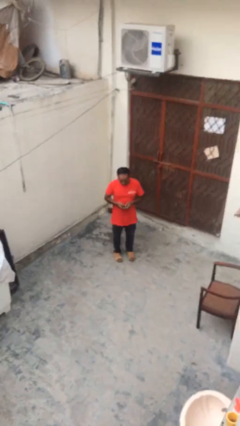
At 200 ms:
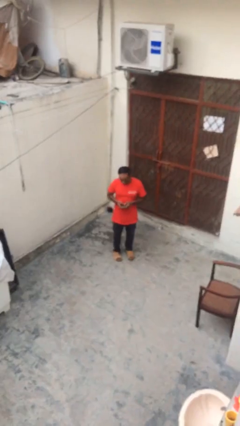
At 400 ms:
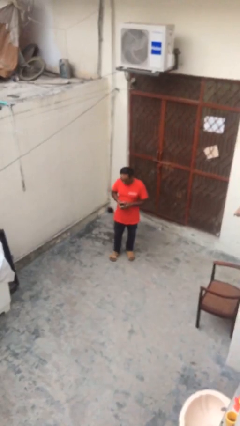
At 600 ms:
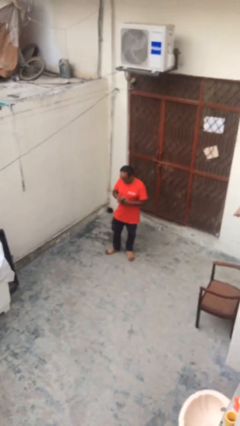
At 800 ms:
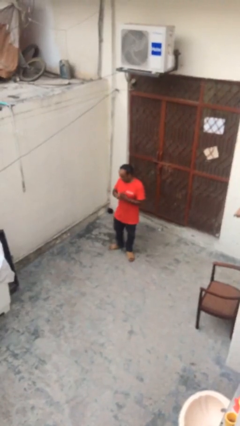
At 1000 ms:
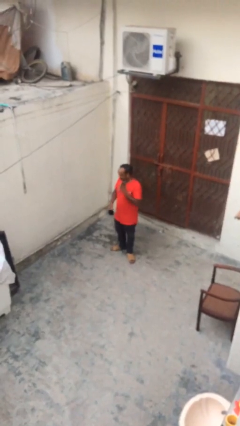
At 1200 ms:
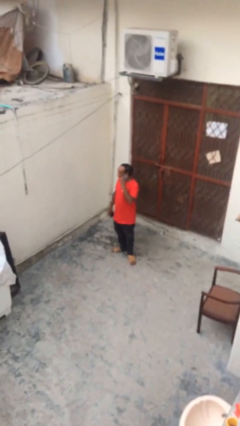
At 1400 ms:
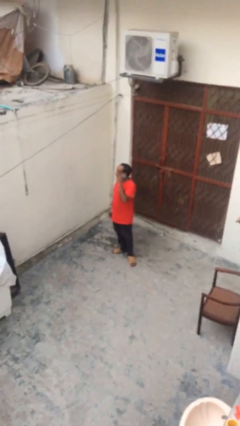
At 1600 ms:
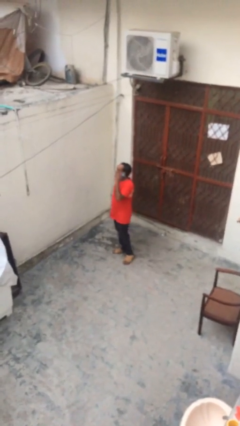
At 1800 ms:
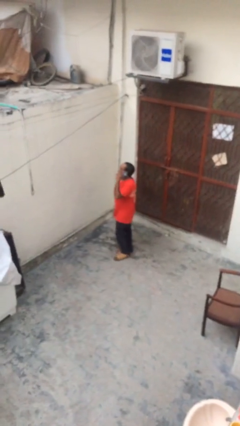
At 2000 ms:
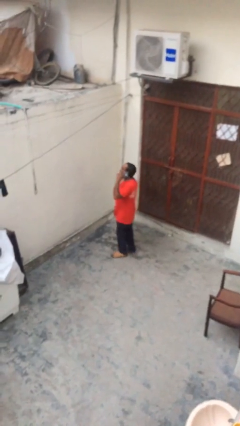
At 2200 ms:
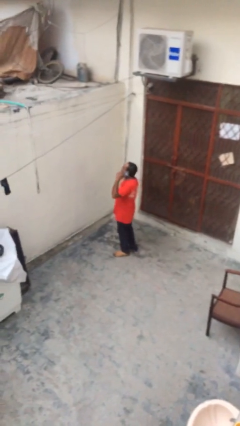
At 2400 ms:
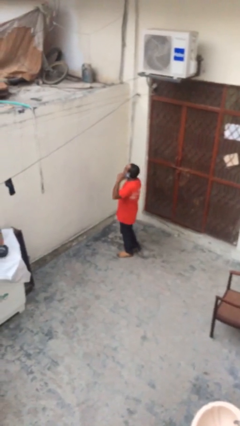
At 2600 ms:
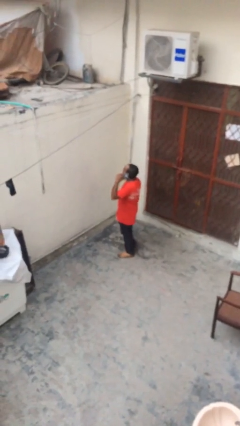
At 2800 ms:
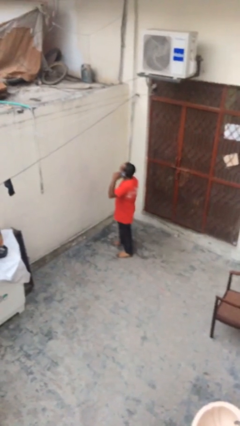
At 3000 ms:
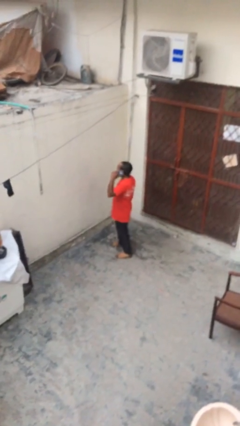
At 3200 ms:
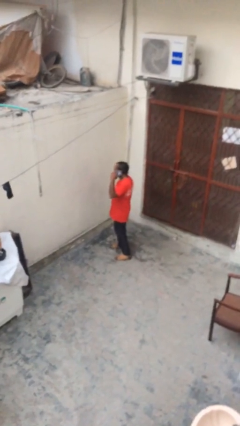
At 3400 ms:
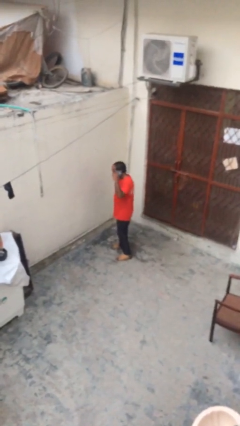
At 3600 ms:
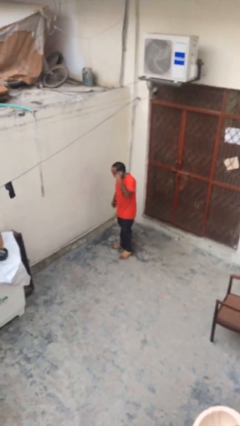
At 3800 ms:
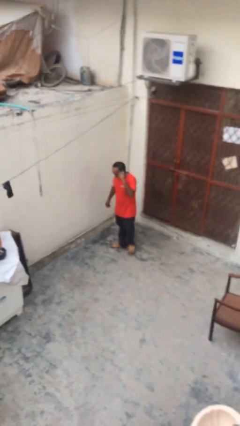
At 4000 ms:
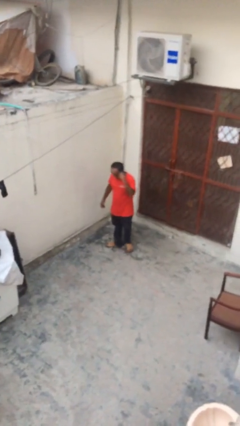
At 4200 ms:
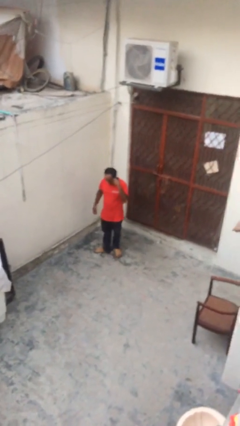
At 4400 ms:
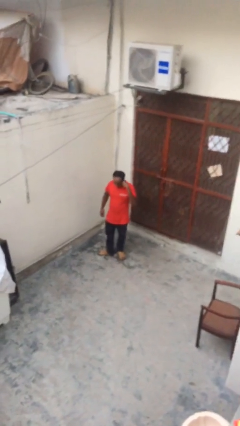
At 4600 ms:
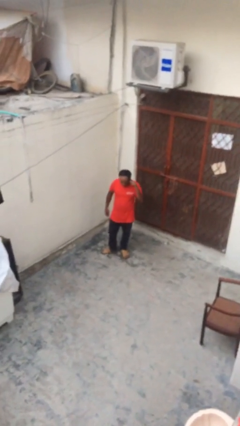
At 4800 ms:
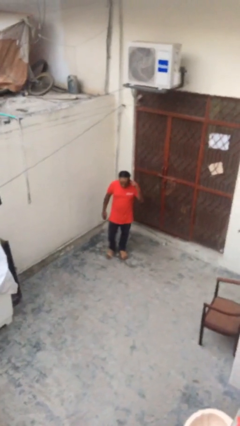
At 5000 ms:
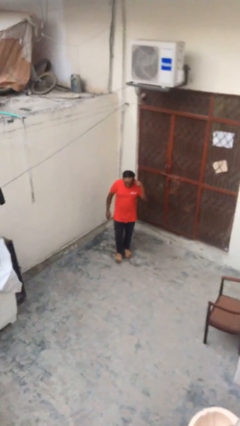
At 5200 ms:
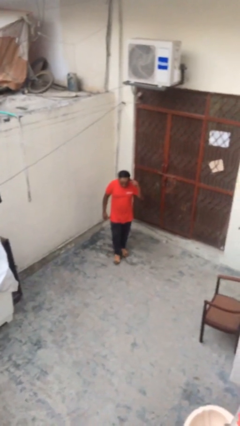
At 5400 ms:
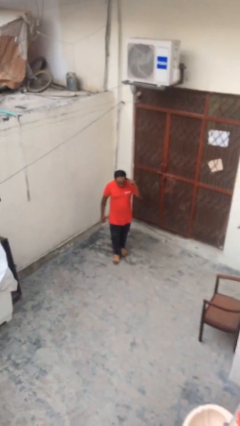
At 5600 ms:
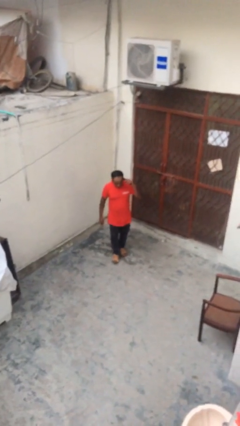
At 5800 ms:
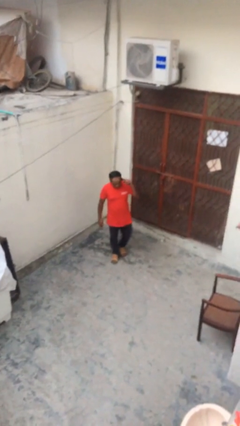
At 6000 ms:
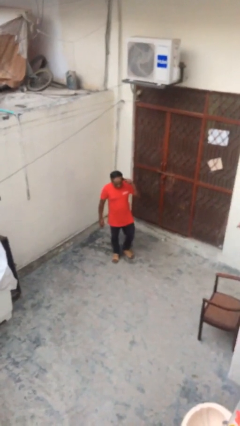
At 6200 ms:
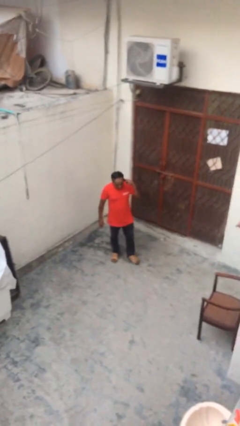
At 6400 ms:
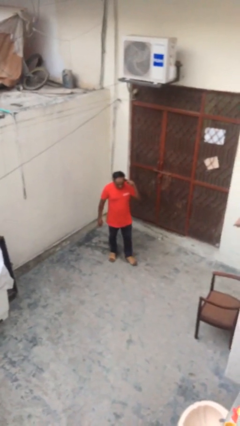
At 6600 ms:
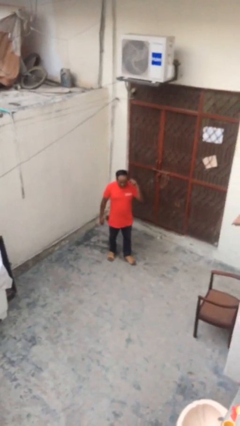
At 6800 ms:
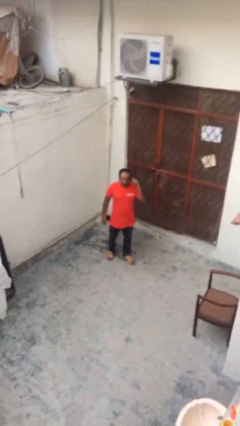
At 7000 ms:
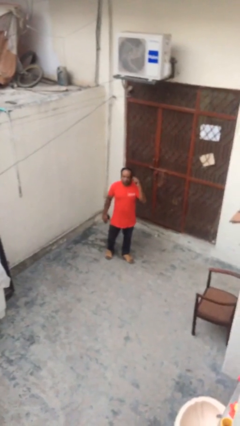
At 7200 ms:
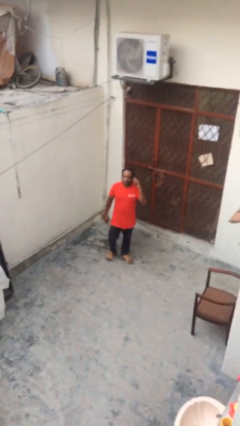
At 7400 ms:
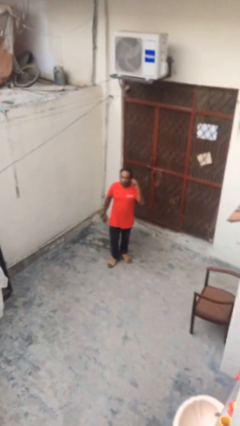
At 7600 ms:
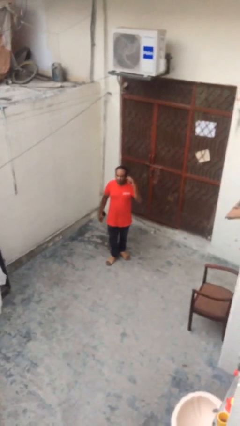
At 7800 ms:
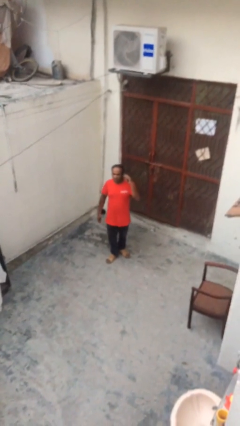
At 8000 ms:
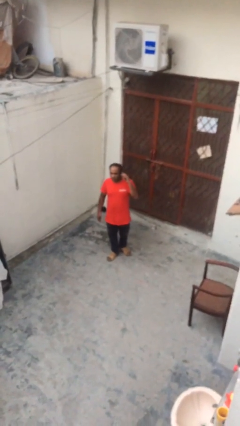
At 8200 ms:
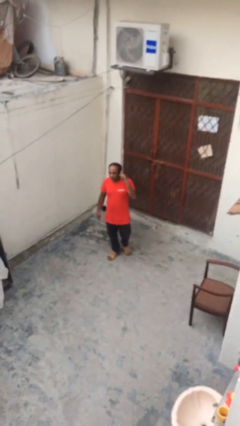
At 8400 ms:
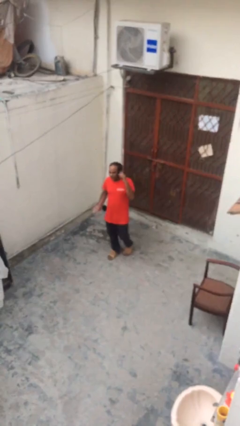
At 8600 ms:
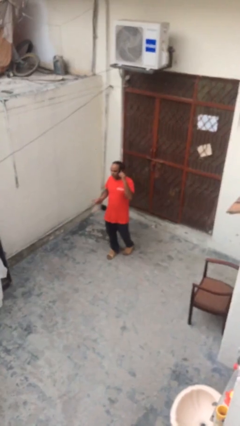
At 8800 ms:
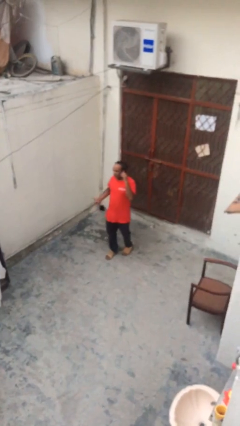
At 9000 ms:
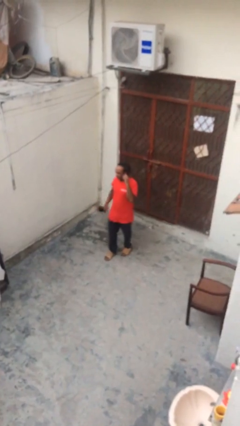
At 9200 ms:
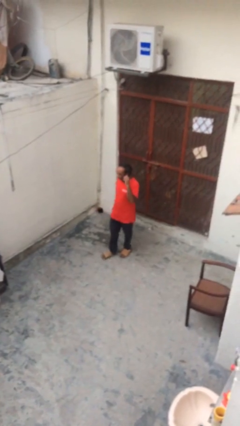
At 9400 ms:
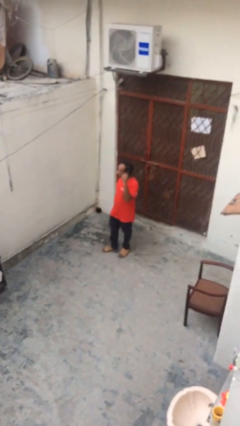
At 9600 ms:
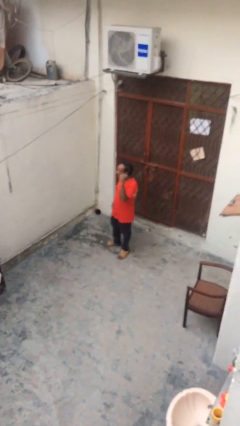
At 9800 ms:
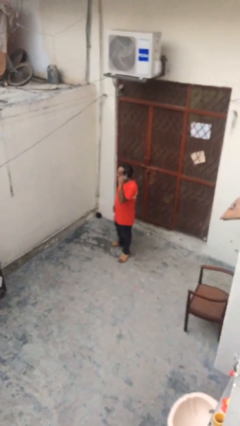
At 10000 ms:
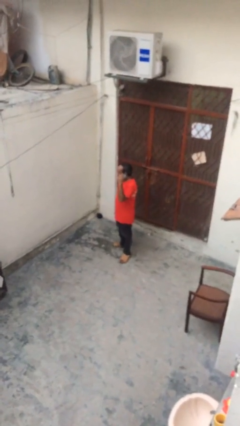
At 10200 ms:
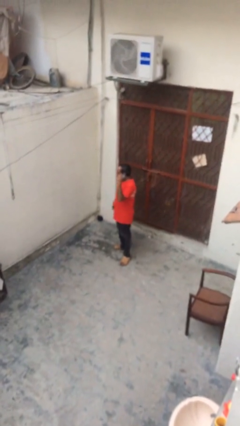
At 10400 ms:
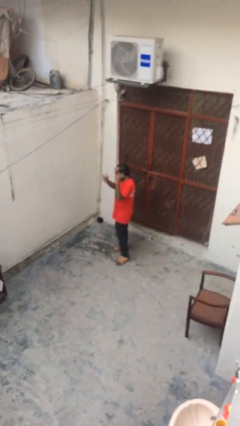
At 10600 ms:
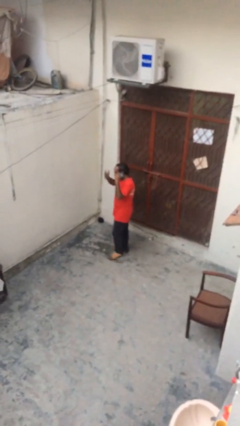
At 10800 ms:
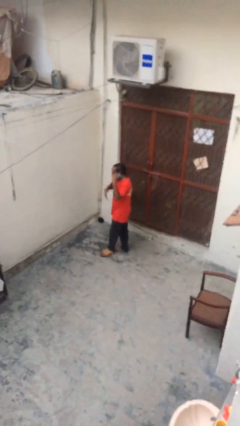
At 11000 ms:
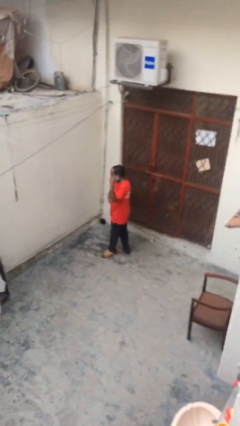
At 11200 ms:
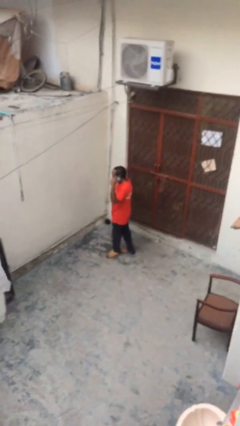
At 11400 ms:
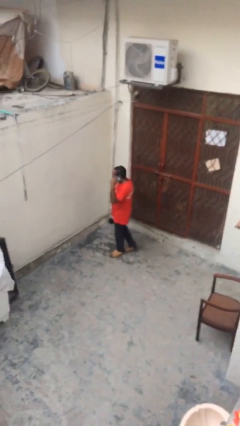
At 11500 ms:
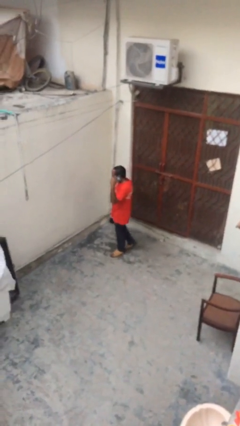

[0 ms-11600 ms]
person talks on phone

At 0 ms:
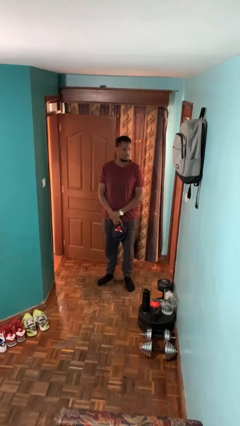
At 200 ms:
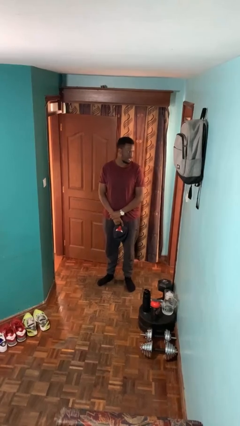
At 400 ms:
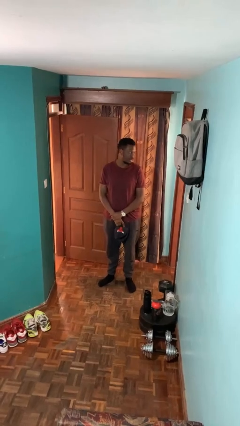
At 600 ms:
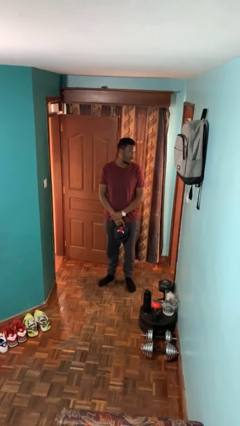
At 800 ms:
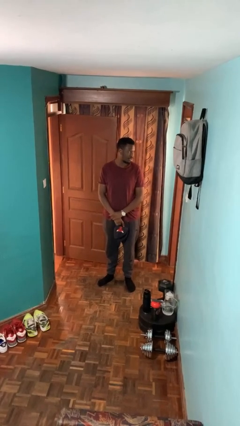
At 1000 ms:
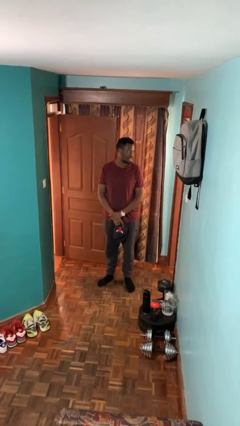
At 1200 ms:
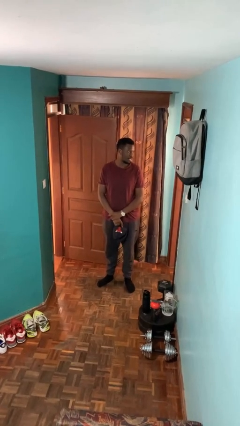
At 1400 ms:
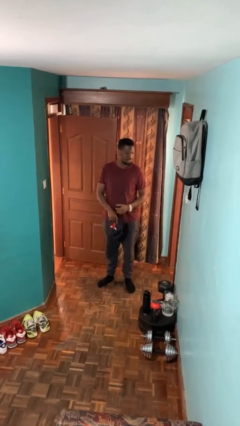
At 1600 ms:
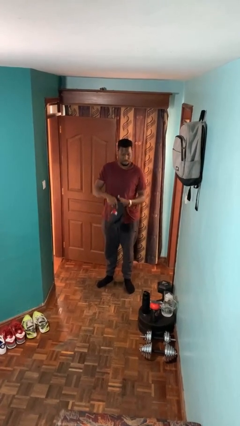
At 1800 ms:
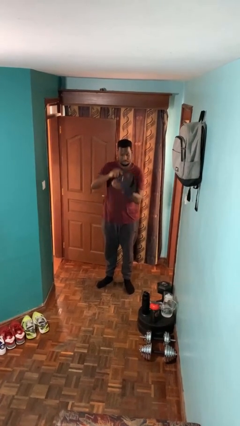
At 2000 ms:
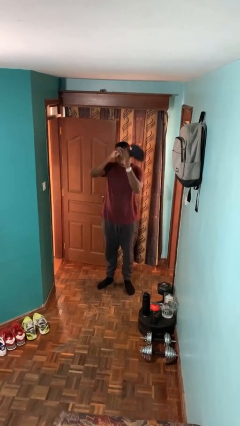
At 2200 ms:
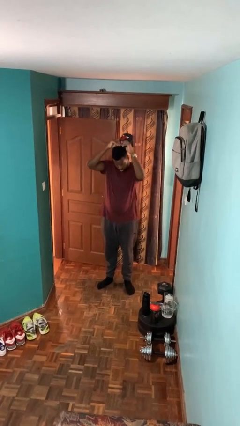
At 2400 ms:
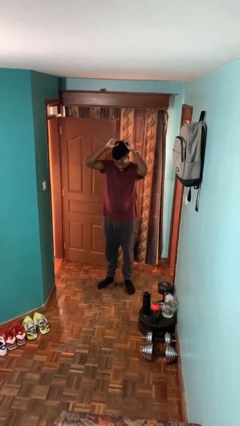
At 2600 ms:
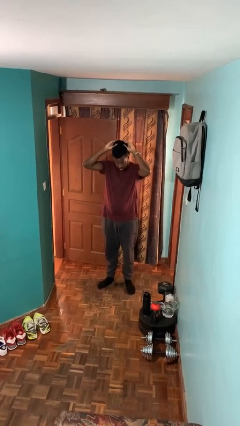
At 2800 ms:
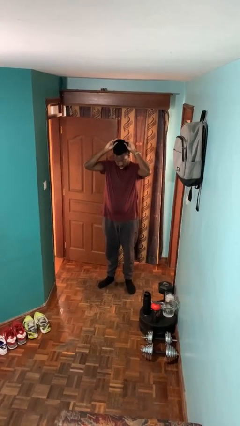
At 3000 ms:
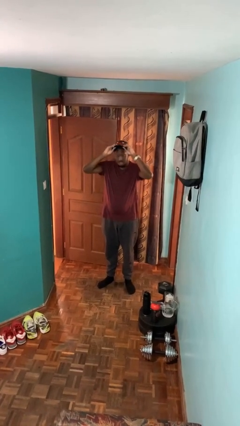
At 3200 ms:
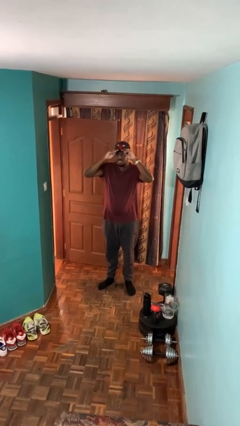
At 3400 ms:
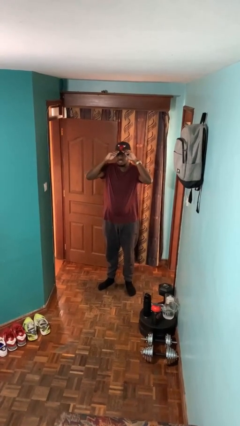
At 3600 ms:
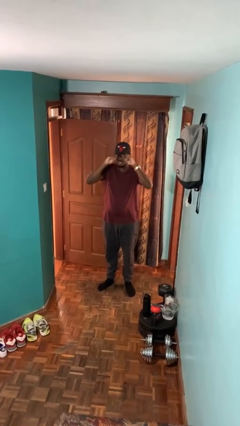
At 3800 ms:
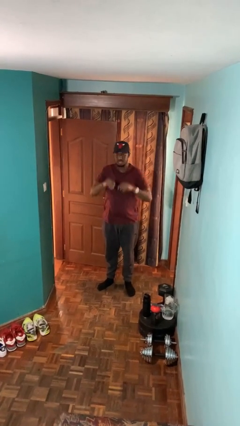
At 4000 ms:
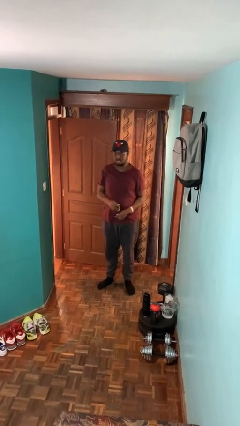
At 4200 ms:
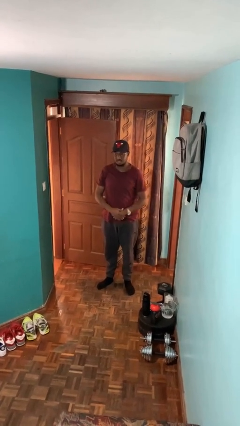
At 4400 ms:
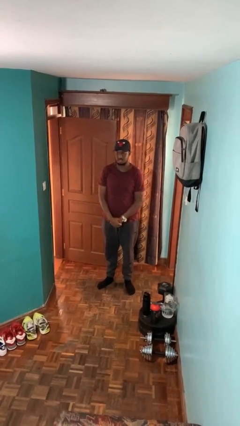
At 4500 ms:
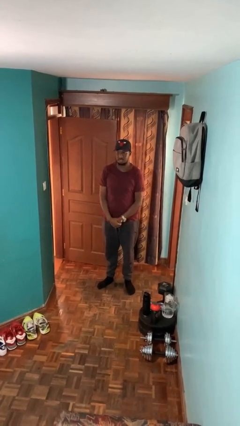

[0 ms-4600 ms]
person puts on hat

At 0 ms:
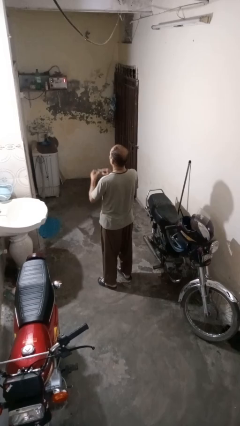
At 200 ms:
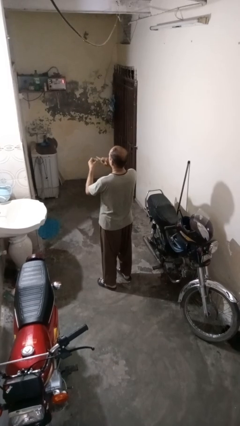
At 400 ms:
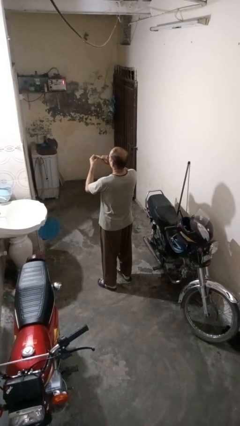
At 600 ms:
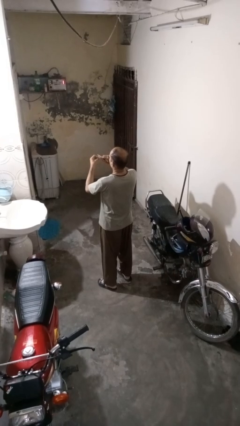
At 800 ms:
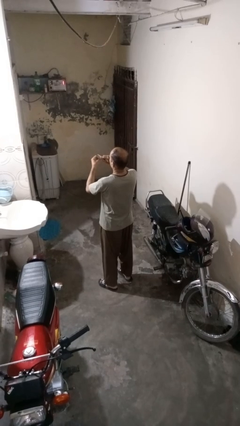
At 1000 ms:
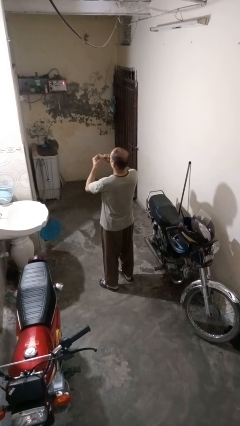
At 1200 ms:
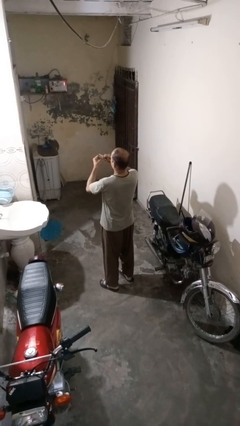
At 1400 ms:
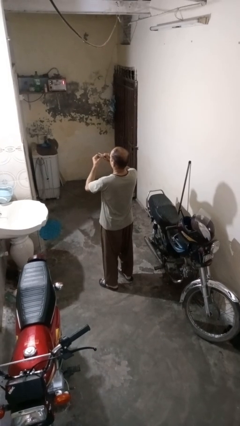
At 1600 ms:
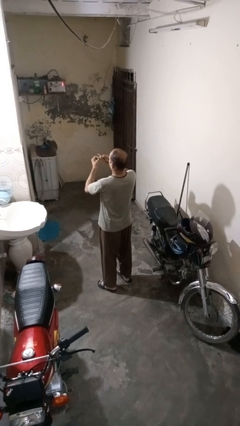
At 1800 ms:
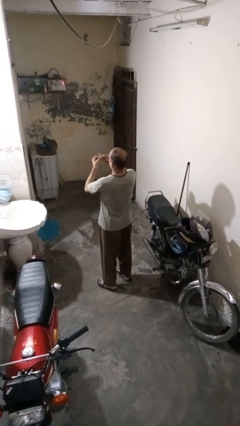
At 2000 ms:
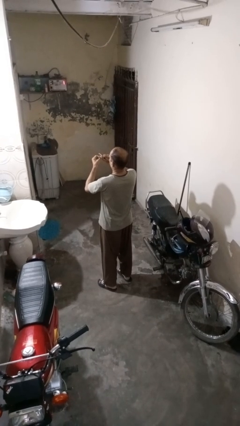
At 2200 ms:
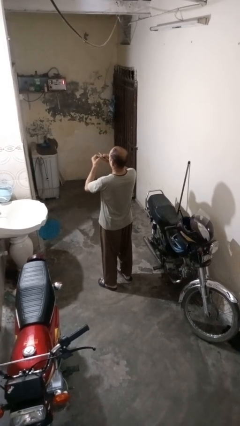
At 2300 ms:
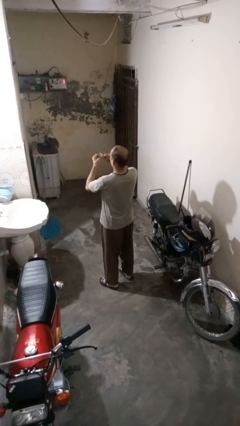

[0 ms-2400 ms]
person files fingernails
